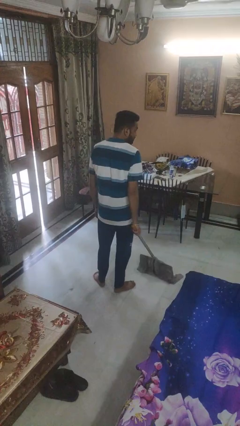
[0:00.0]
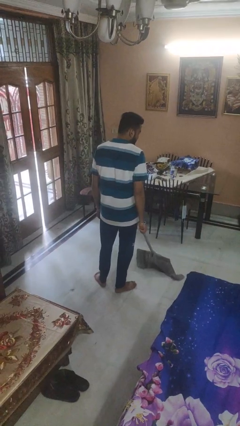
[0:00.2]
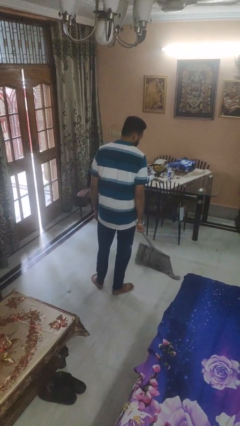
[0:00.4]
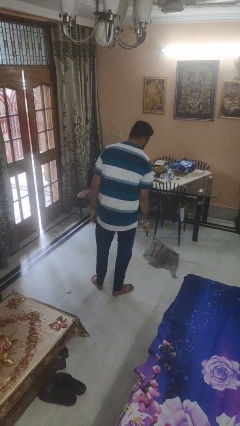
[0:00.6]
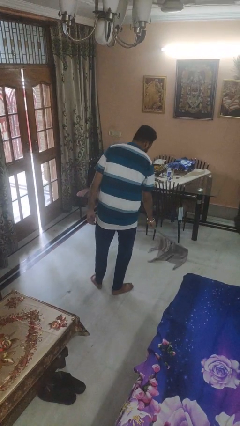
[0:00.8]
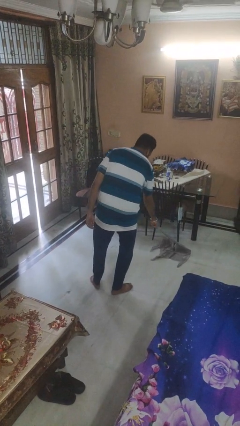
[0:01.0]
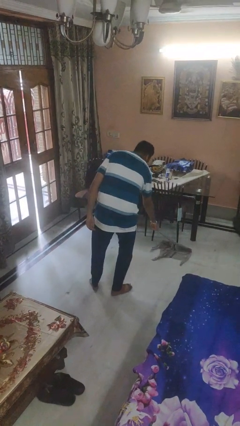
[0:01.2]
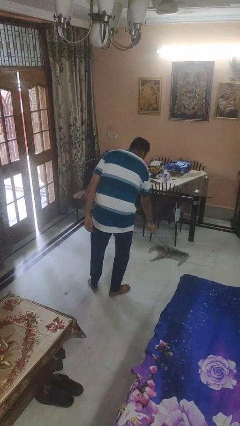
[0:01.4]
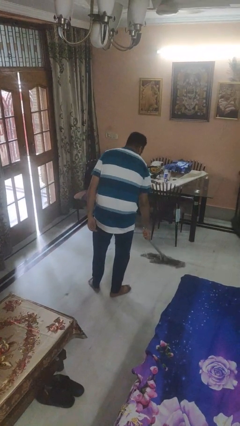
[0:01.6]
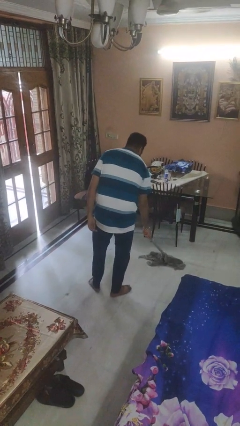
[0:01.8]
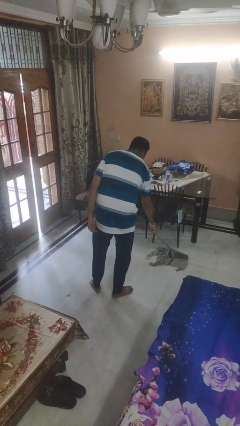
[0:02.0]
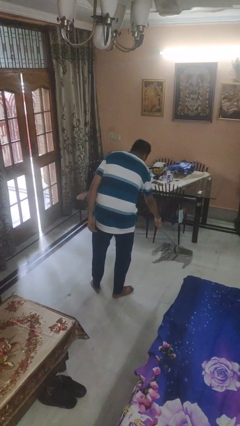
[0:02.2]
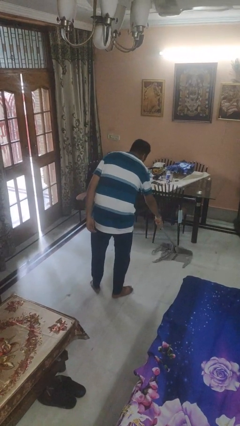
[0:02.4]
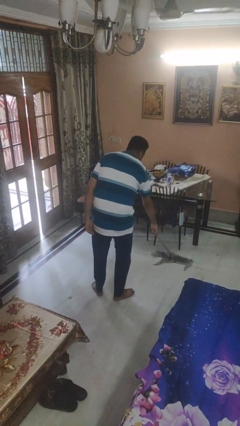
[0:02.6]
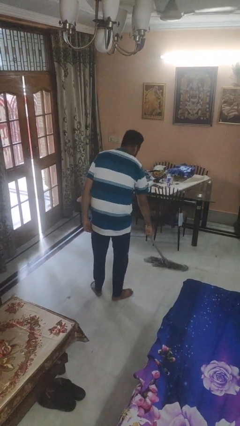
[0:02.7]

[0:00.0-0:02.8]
person mops

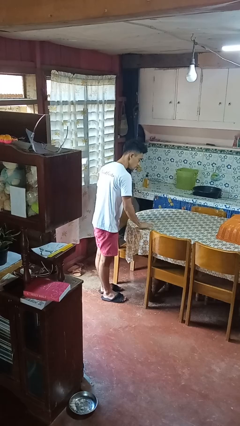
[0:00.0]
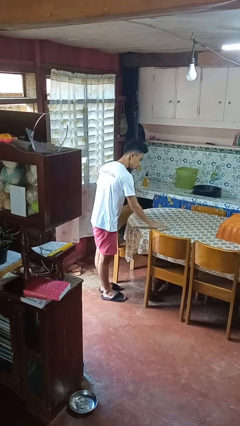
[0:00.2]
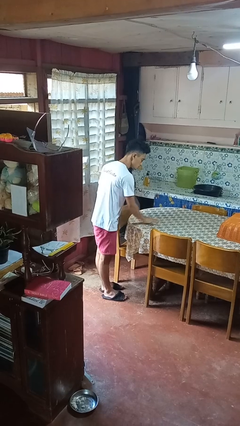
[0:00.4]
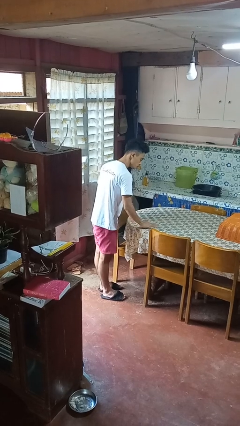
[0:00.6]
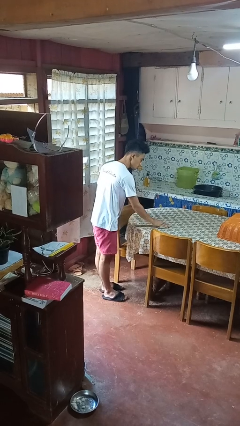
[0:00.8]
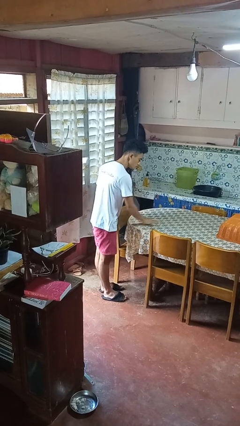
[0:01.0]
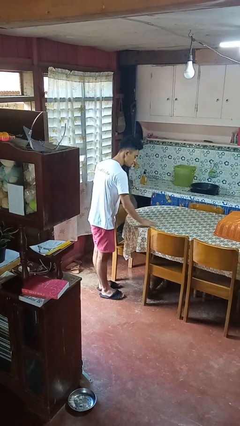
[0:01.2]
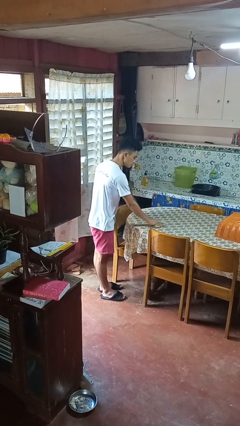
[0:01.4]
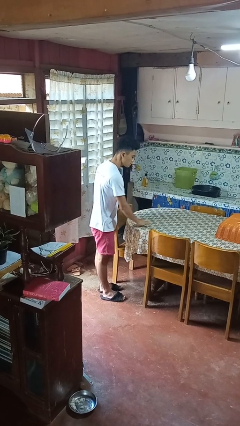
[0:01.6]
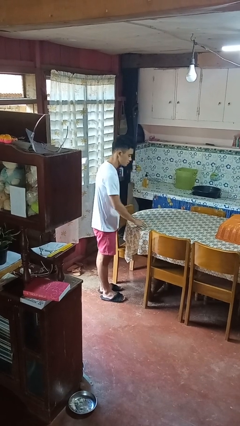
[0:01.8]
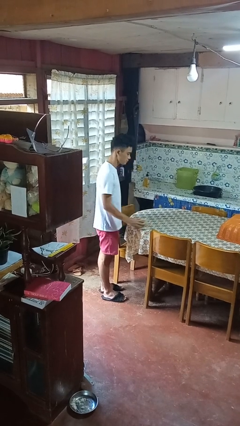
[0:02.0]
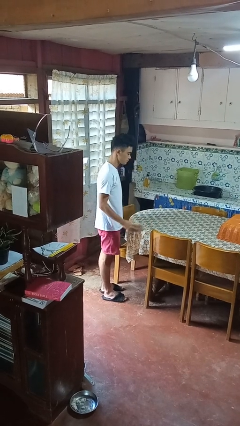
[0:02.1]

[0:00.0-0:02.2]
person cleans table with rag

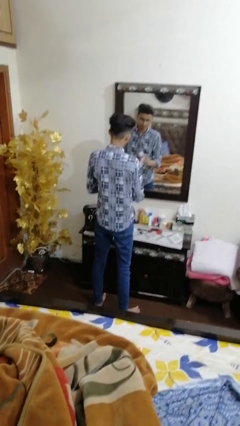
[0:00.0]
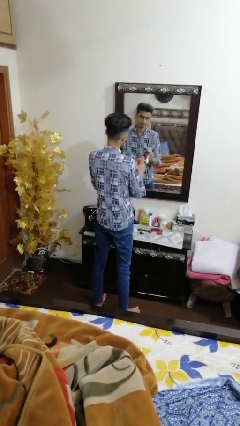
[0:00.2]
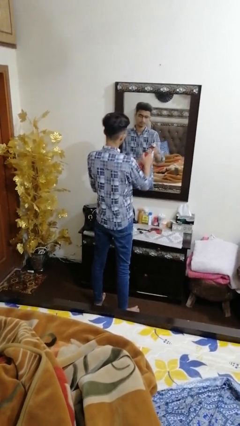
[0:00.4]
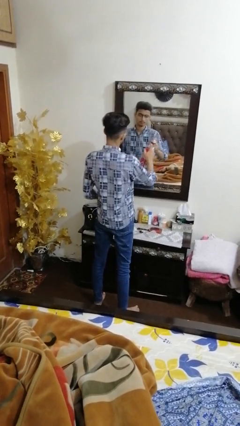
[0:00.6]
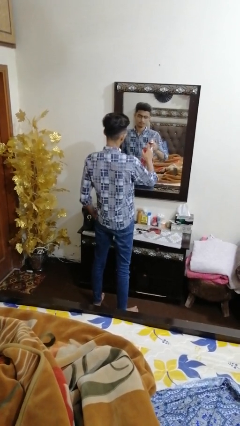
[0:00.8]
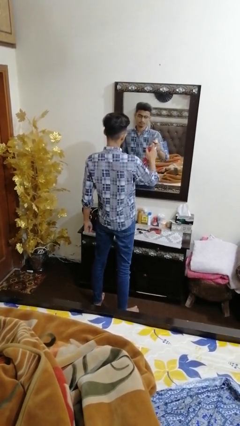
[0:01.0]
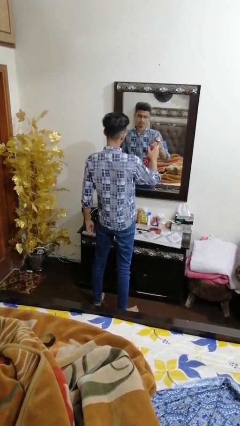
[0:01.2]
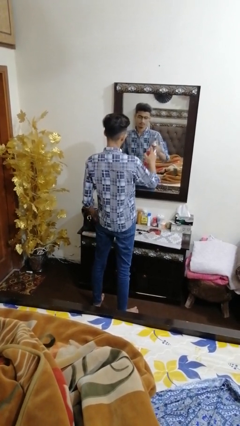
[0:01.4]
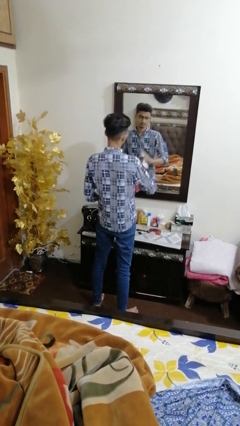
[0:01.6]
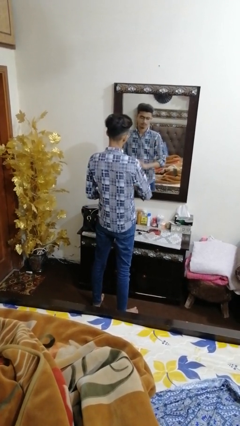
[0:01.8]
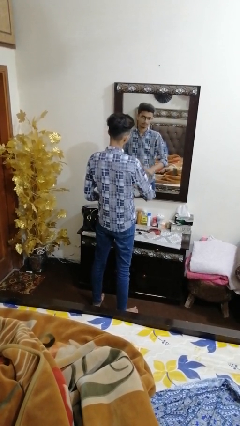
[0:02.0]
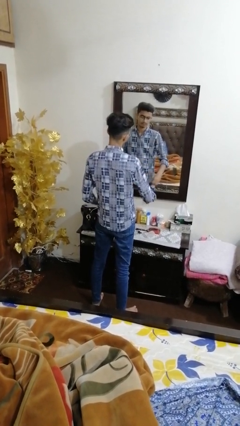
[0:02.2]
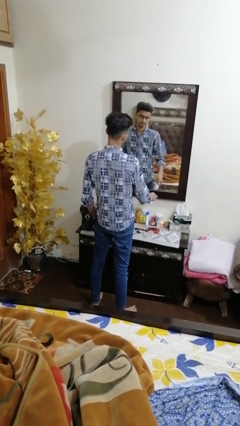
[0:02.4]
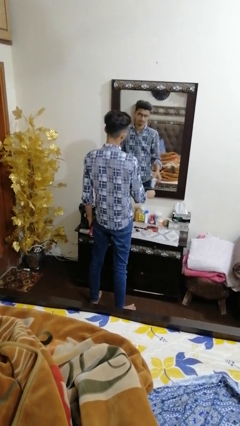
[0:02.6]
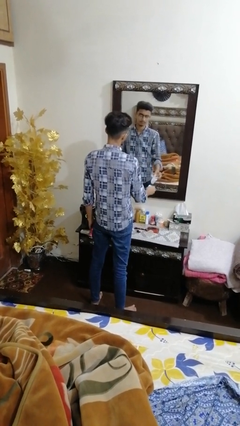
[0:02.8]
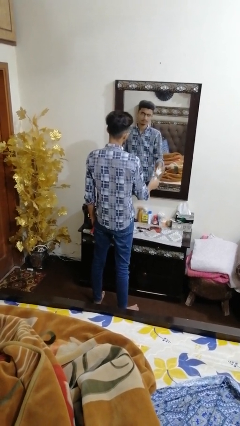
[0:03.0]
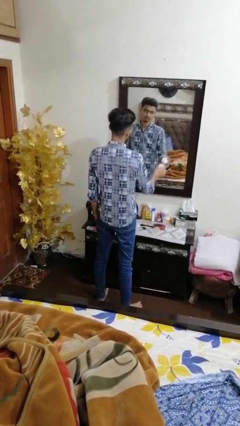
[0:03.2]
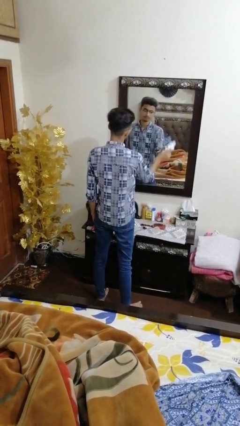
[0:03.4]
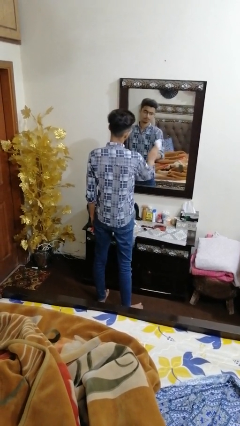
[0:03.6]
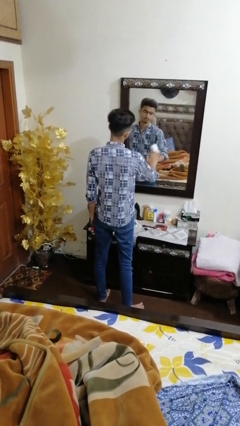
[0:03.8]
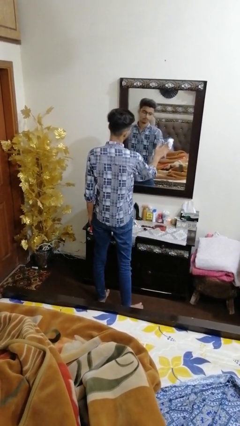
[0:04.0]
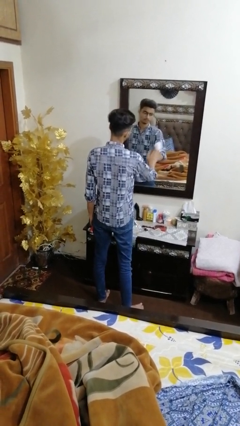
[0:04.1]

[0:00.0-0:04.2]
person sprays from bottle

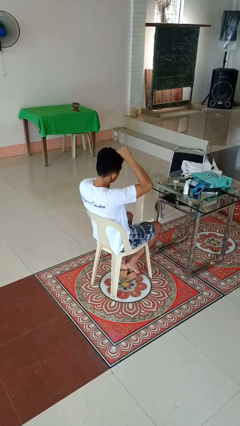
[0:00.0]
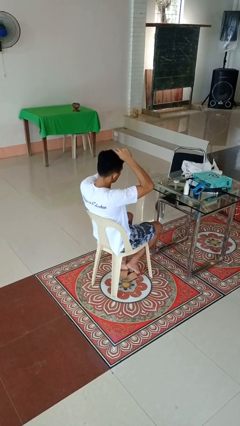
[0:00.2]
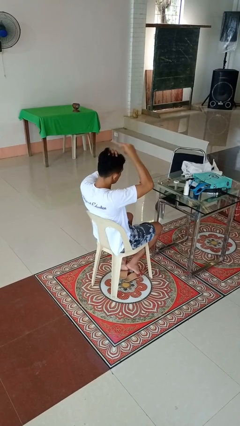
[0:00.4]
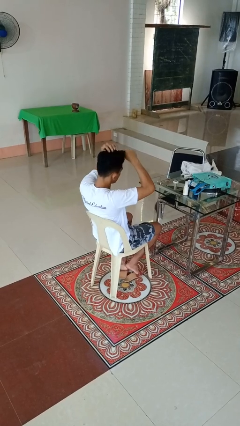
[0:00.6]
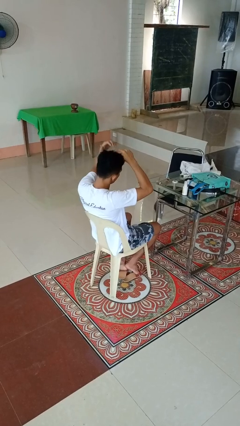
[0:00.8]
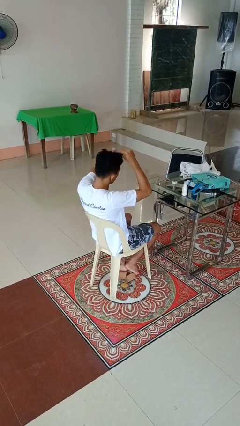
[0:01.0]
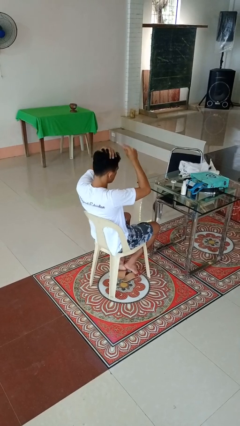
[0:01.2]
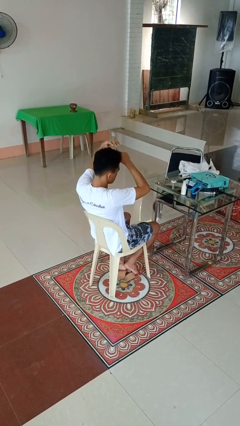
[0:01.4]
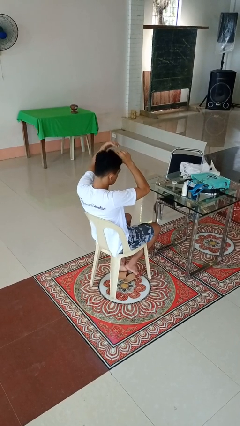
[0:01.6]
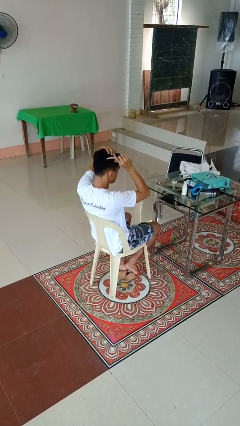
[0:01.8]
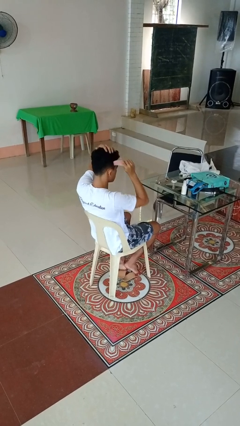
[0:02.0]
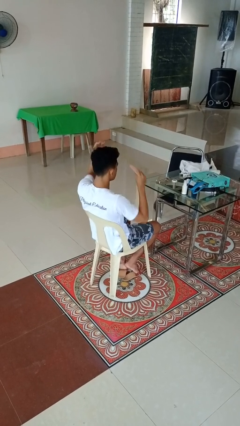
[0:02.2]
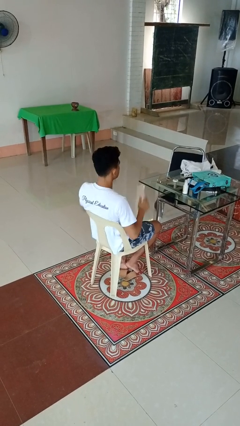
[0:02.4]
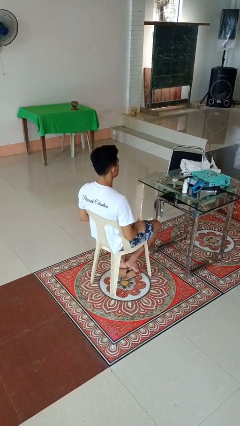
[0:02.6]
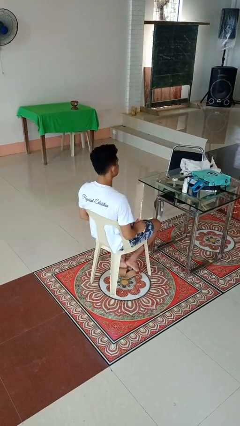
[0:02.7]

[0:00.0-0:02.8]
person brushes hair

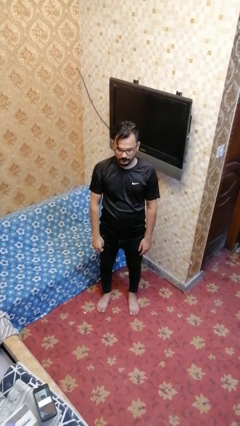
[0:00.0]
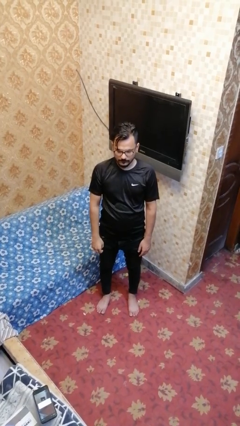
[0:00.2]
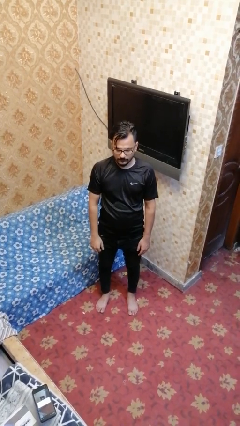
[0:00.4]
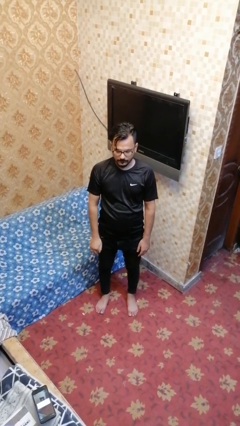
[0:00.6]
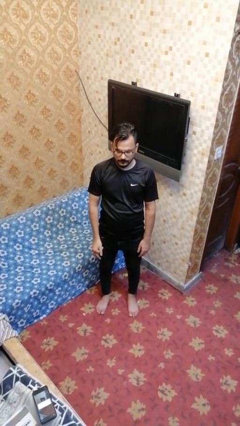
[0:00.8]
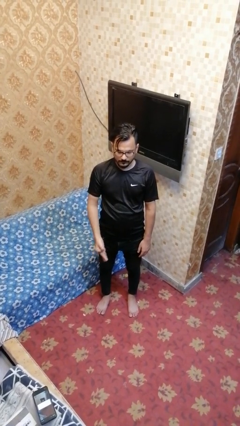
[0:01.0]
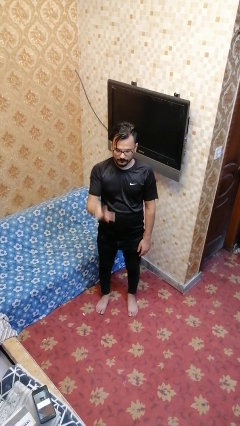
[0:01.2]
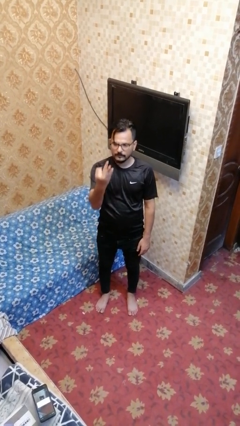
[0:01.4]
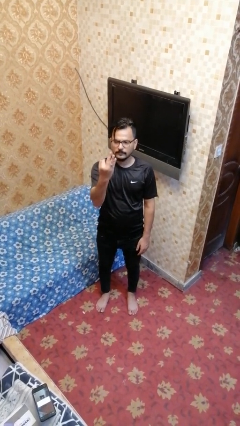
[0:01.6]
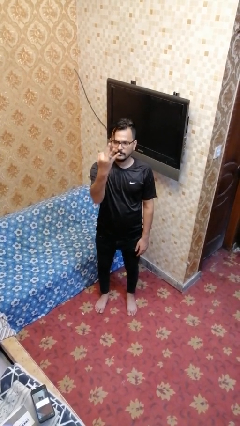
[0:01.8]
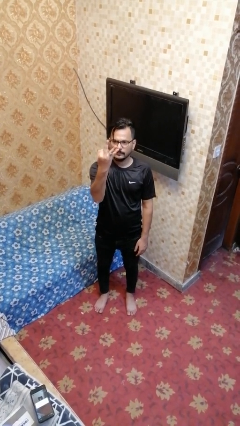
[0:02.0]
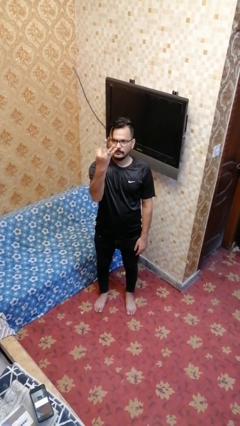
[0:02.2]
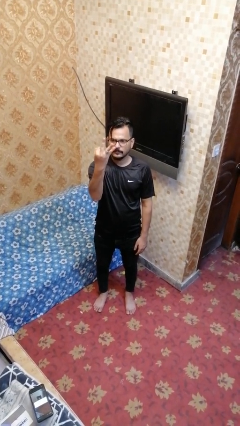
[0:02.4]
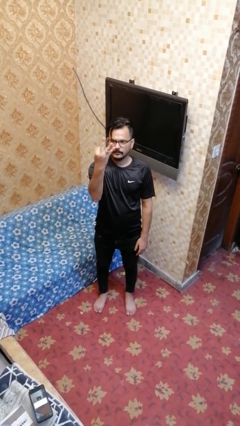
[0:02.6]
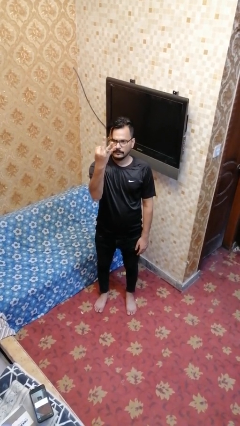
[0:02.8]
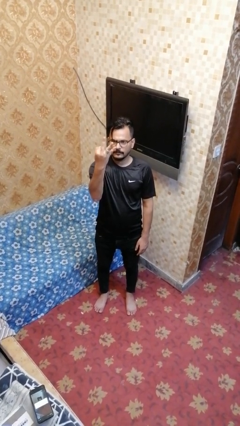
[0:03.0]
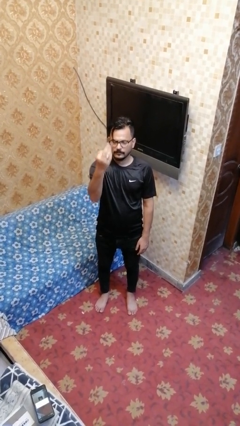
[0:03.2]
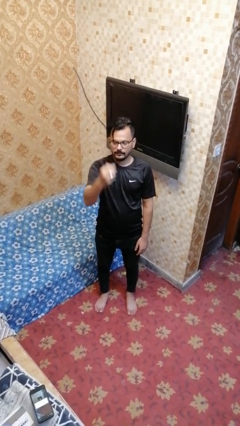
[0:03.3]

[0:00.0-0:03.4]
person gestures number three

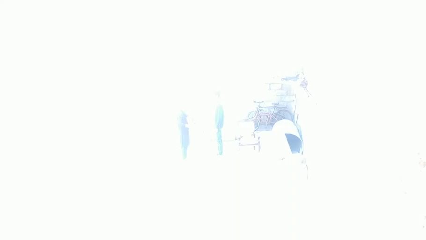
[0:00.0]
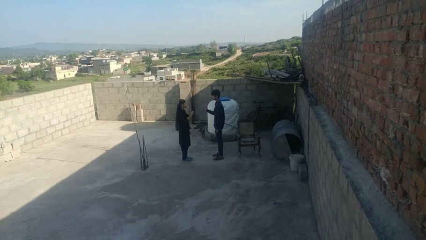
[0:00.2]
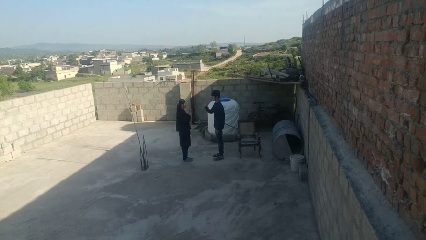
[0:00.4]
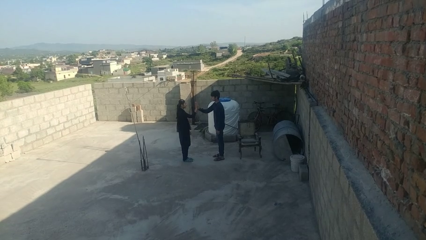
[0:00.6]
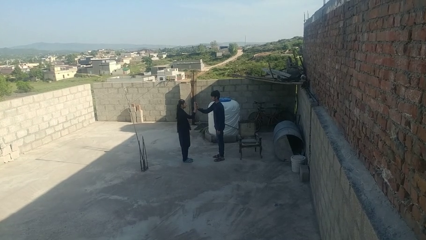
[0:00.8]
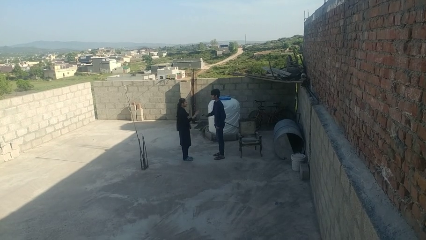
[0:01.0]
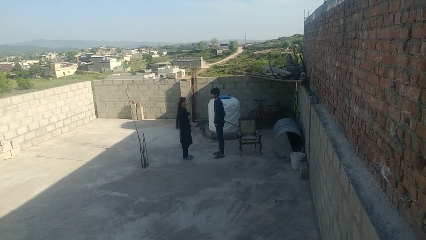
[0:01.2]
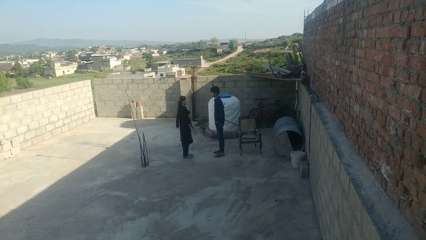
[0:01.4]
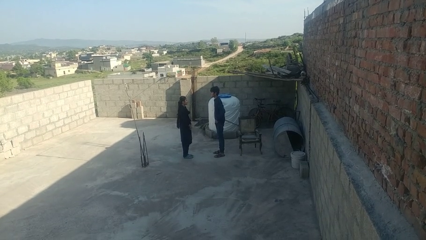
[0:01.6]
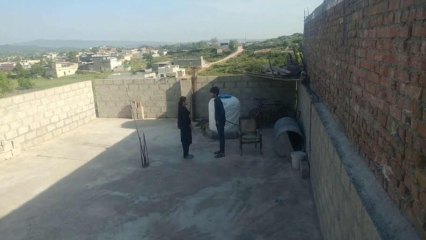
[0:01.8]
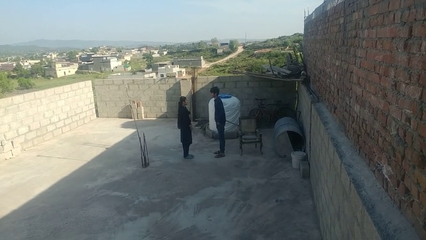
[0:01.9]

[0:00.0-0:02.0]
person highfives hand
